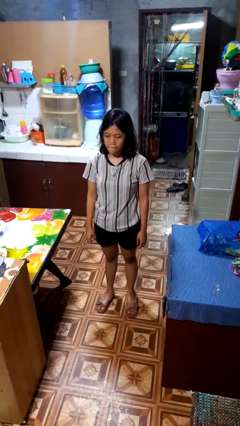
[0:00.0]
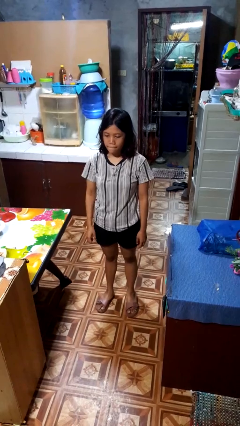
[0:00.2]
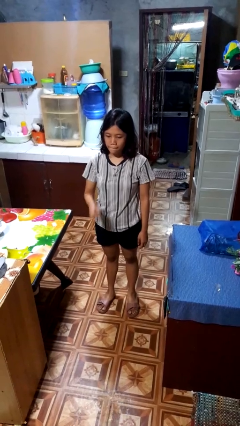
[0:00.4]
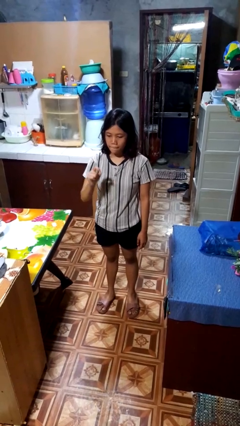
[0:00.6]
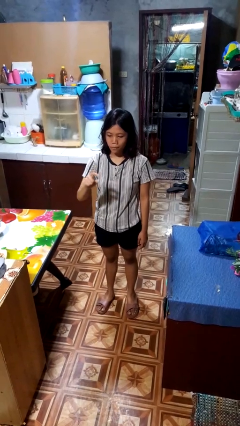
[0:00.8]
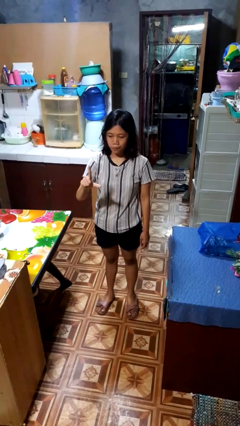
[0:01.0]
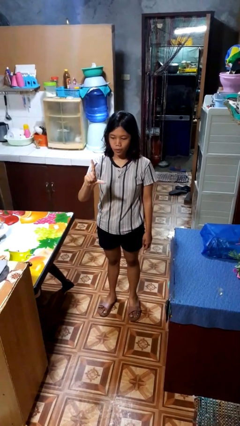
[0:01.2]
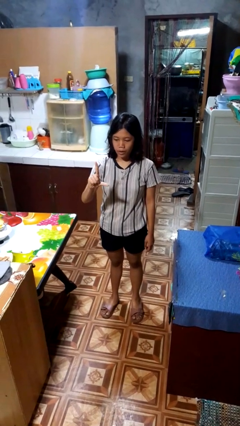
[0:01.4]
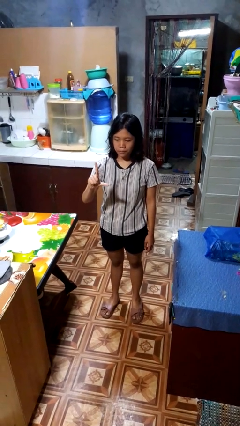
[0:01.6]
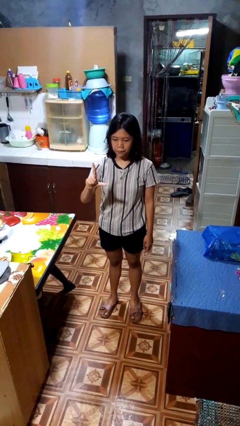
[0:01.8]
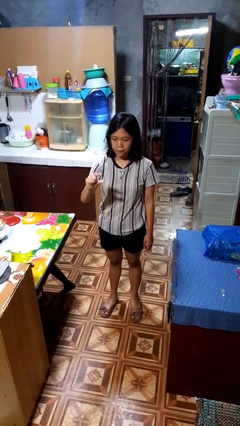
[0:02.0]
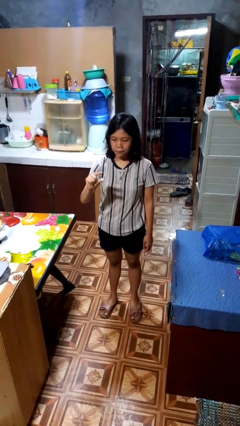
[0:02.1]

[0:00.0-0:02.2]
person gestures zoom in

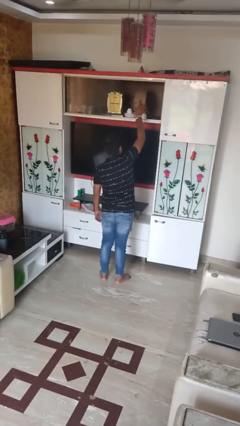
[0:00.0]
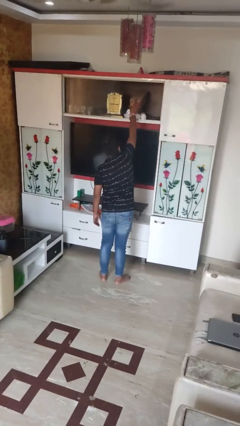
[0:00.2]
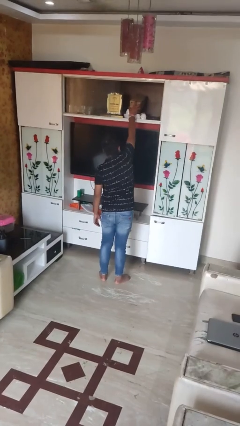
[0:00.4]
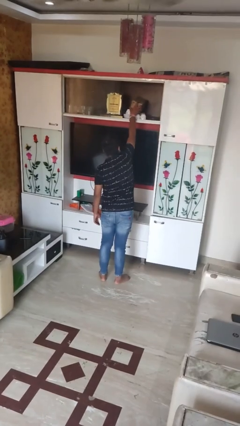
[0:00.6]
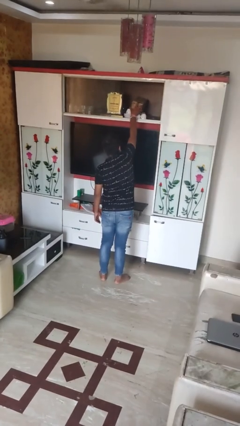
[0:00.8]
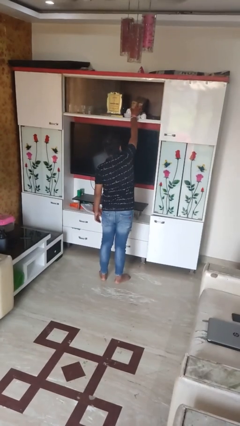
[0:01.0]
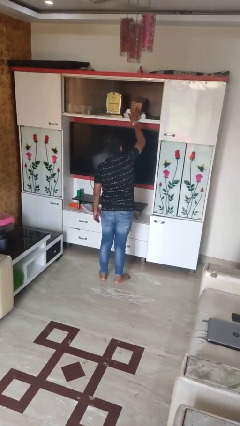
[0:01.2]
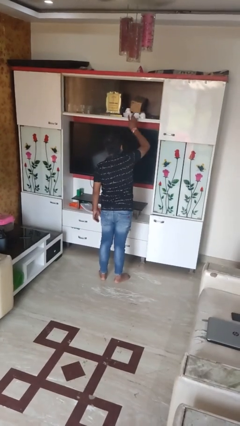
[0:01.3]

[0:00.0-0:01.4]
person puts down object on shelf

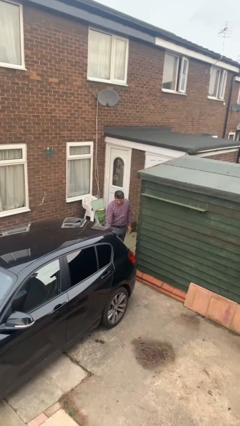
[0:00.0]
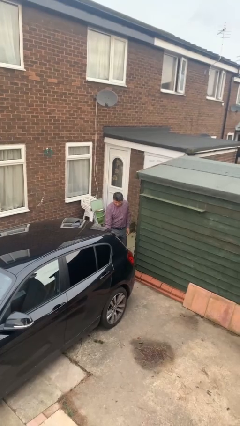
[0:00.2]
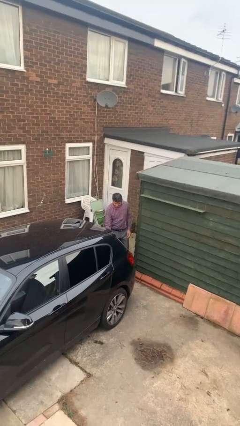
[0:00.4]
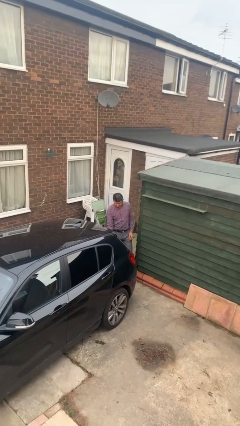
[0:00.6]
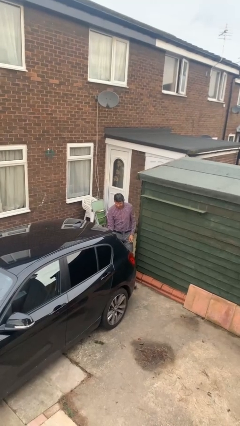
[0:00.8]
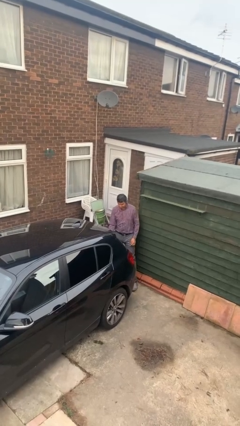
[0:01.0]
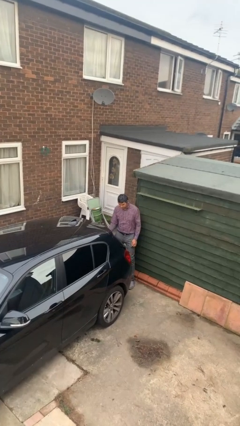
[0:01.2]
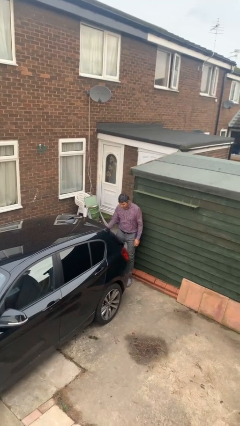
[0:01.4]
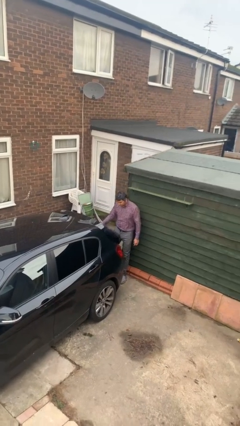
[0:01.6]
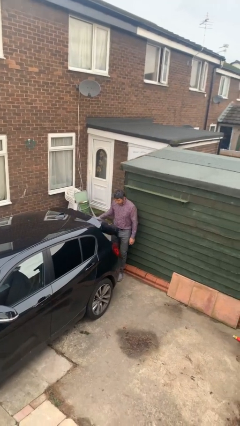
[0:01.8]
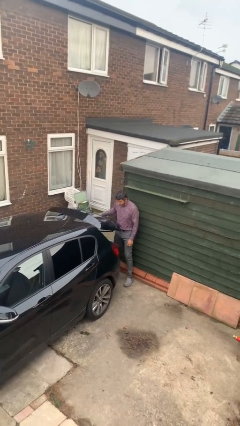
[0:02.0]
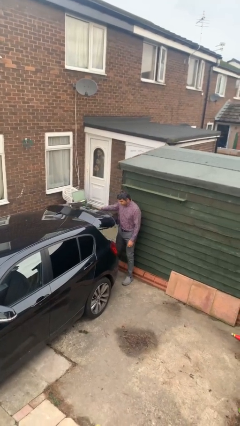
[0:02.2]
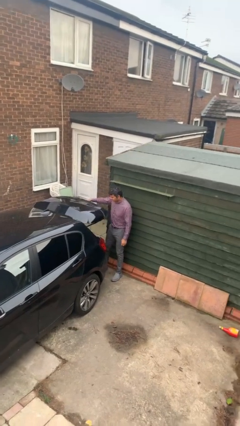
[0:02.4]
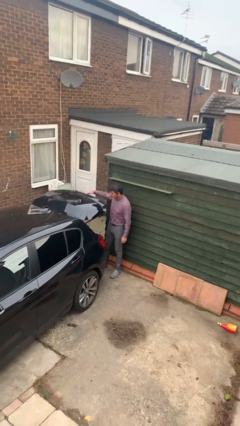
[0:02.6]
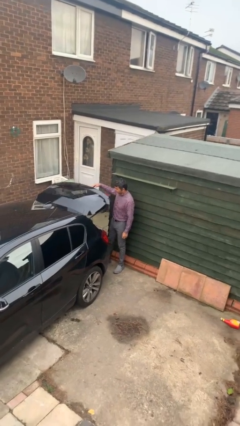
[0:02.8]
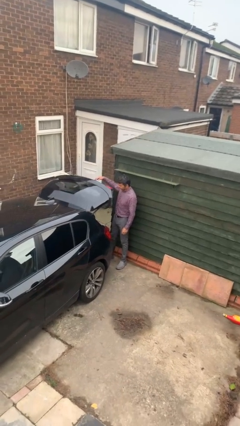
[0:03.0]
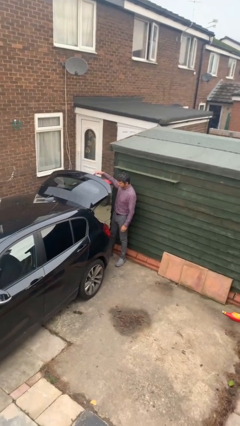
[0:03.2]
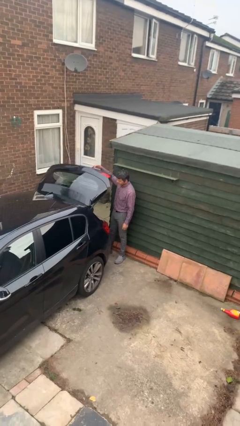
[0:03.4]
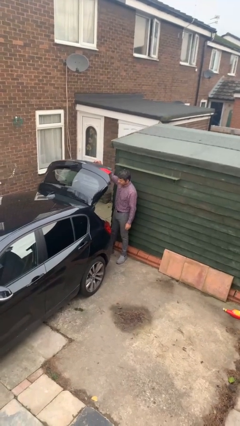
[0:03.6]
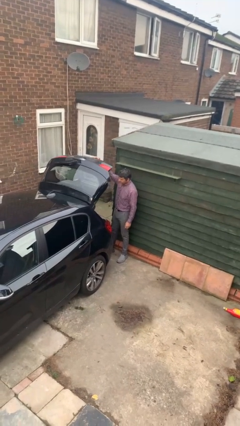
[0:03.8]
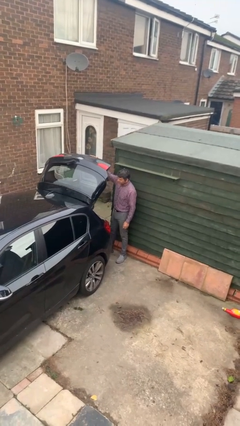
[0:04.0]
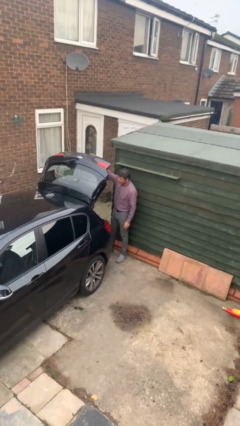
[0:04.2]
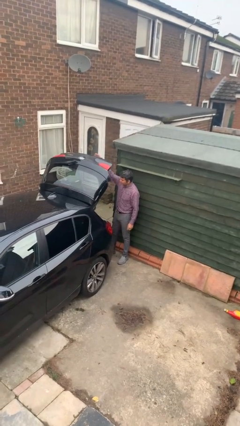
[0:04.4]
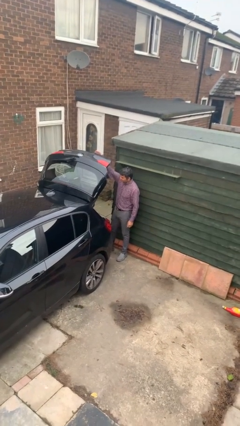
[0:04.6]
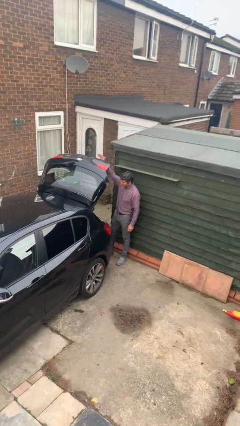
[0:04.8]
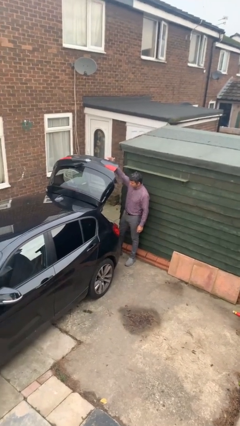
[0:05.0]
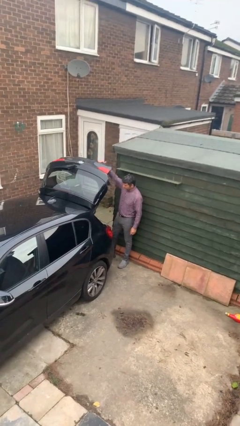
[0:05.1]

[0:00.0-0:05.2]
person opens car trunk

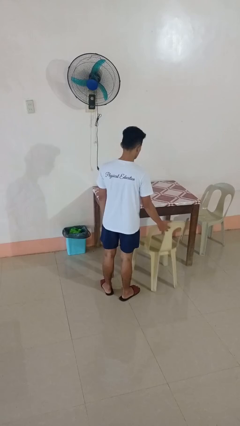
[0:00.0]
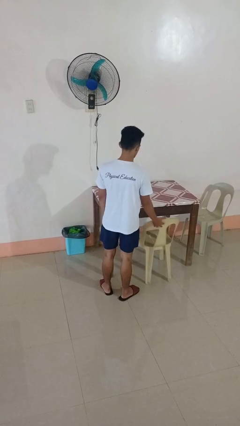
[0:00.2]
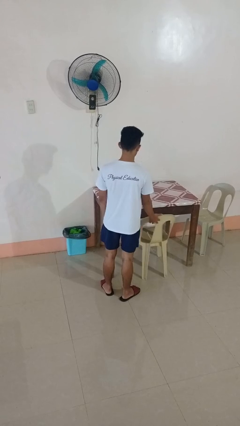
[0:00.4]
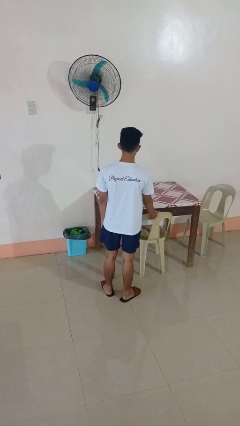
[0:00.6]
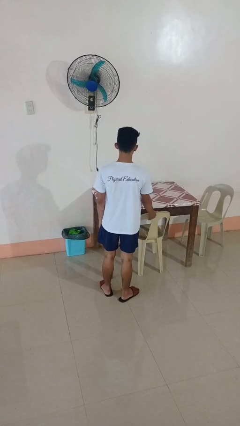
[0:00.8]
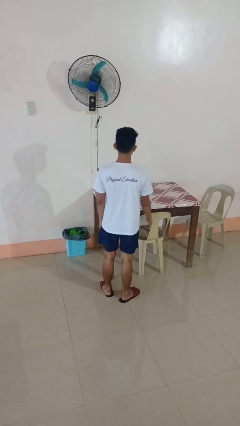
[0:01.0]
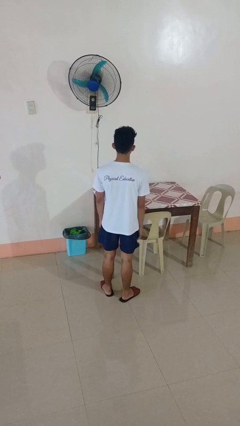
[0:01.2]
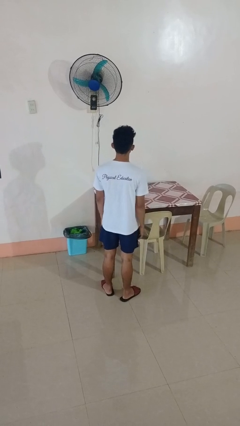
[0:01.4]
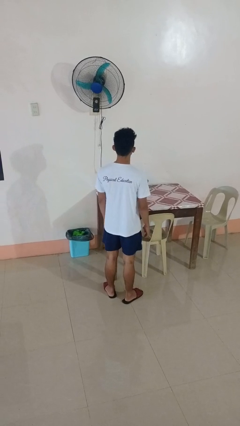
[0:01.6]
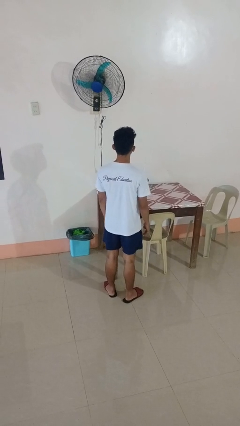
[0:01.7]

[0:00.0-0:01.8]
person pushes in chair

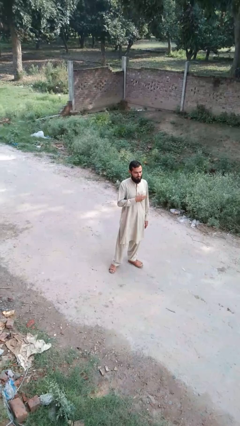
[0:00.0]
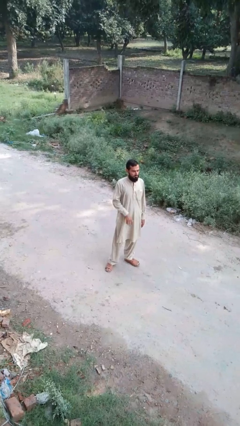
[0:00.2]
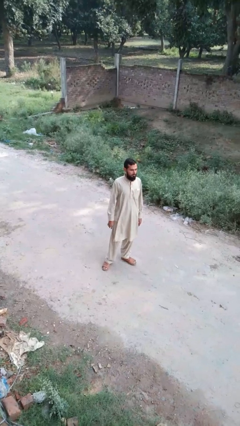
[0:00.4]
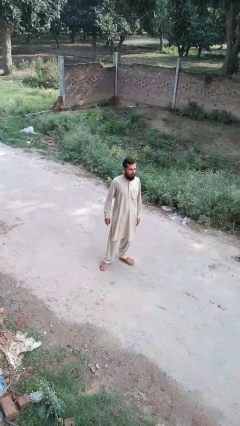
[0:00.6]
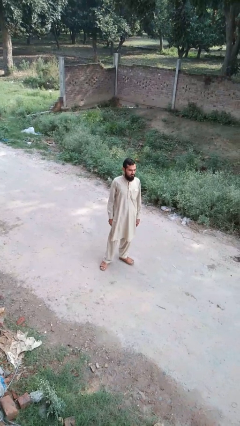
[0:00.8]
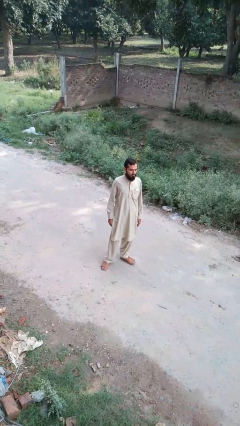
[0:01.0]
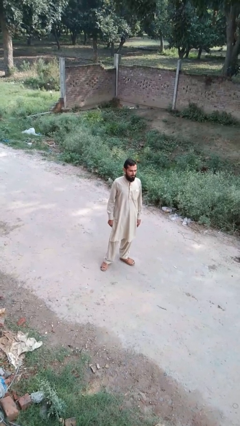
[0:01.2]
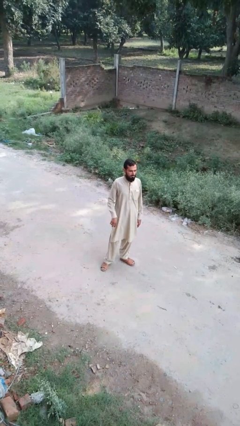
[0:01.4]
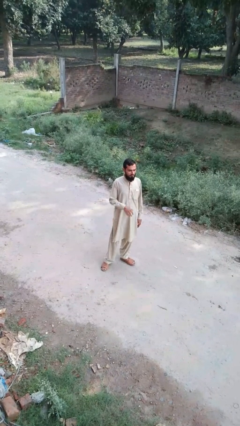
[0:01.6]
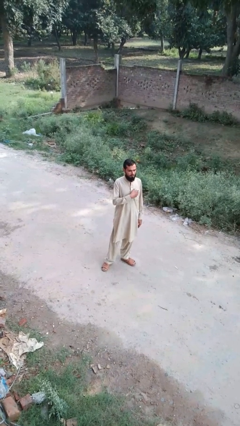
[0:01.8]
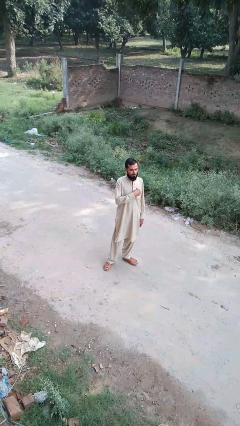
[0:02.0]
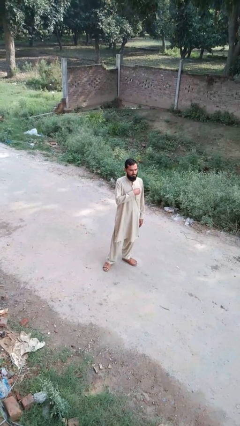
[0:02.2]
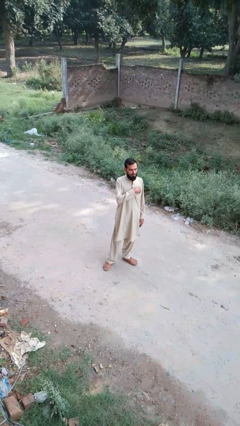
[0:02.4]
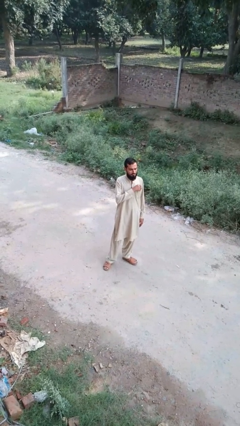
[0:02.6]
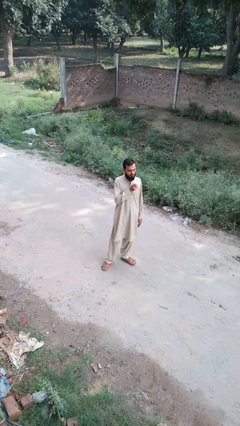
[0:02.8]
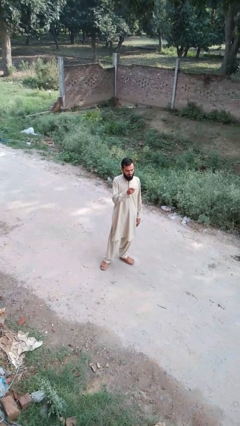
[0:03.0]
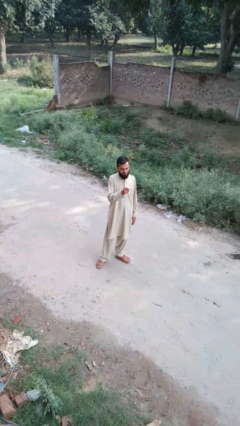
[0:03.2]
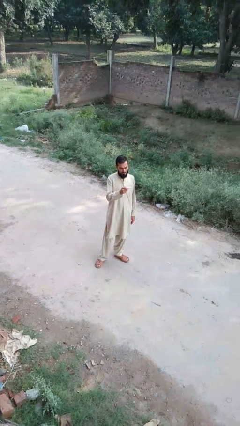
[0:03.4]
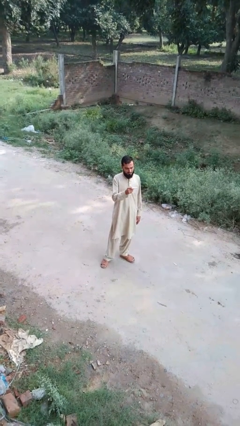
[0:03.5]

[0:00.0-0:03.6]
person takes phone from pocket

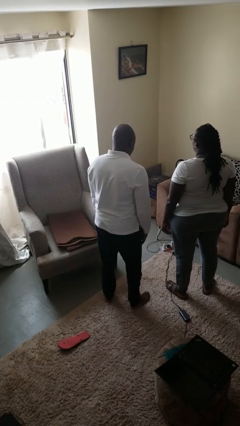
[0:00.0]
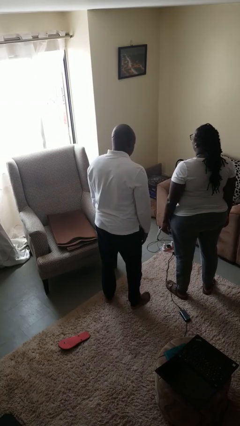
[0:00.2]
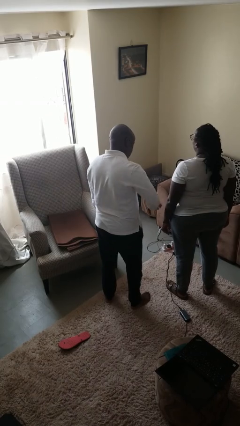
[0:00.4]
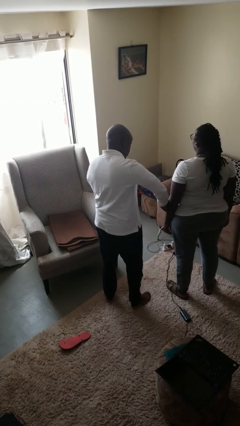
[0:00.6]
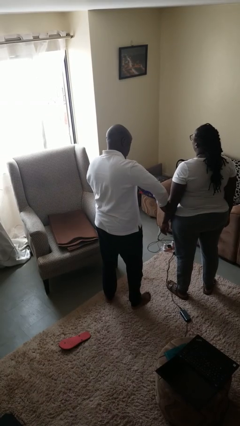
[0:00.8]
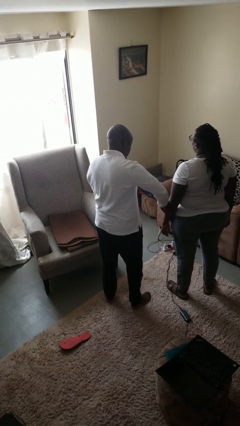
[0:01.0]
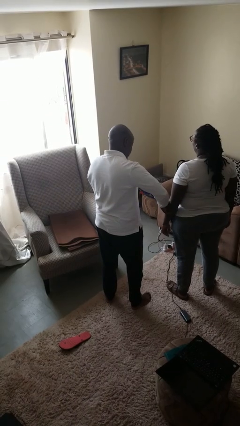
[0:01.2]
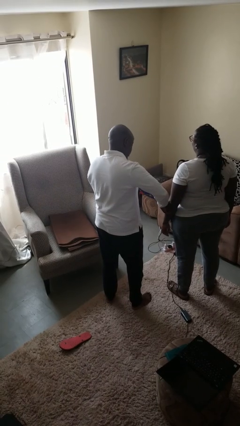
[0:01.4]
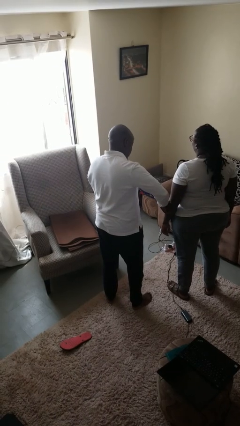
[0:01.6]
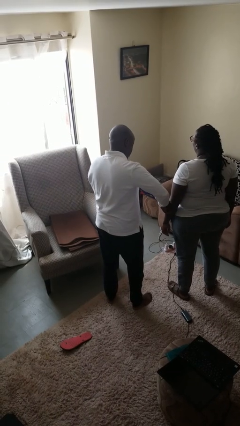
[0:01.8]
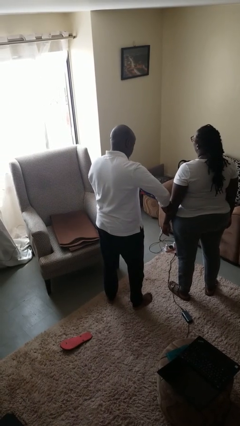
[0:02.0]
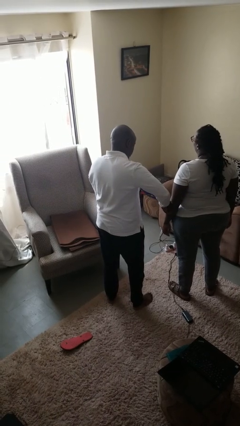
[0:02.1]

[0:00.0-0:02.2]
person grabs person by forearm

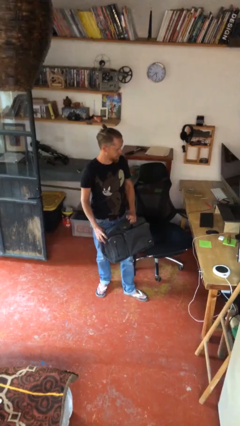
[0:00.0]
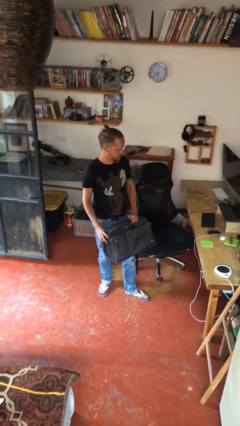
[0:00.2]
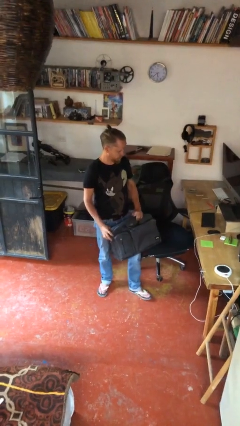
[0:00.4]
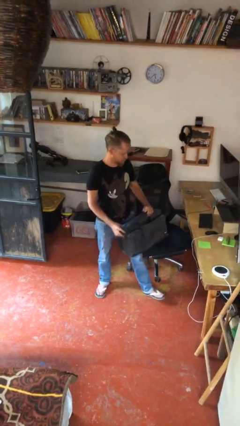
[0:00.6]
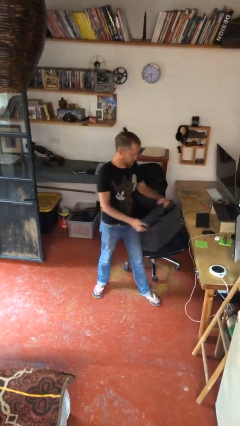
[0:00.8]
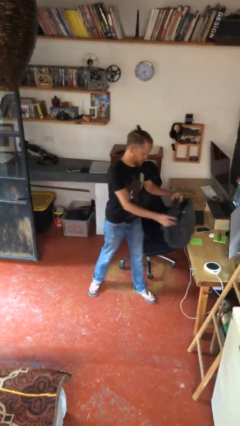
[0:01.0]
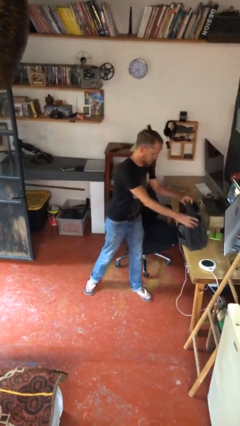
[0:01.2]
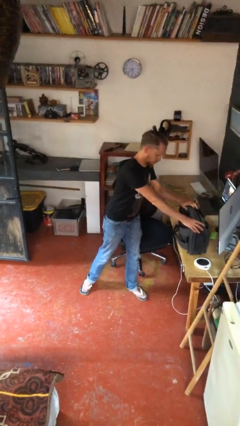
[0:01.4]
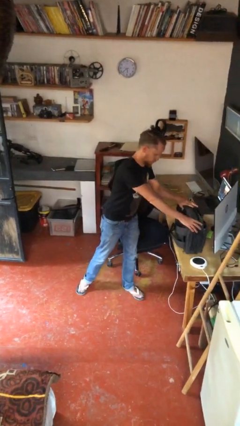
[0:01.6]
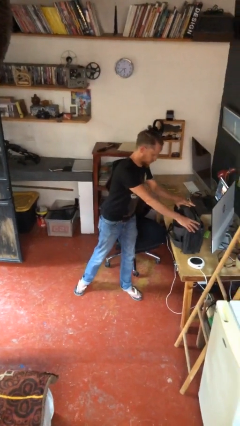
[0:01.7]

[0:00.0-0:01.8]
person puts down object on table
